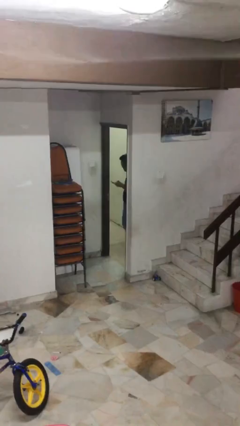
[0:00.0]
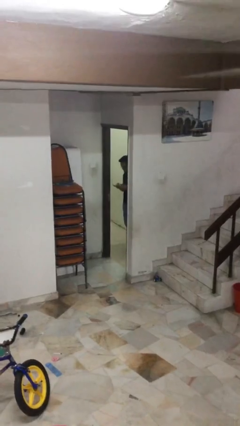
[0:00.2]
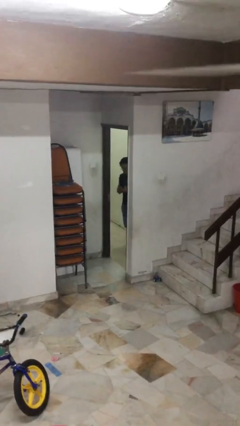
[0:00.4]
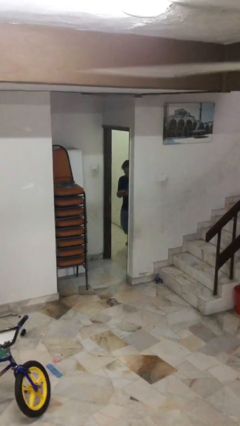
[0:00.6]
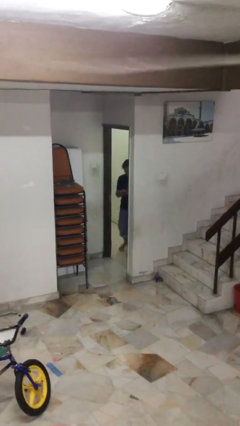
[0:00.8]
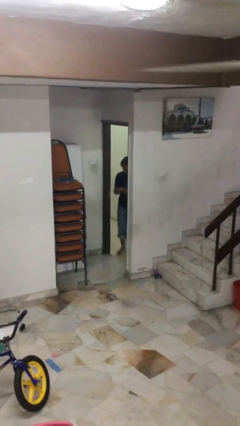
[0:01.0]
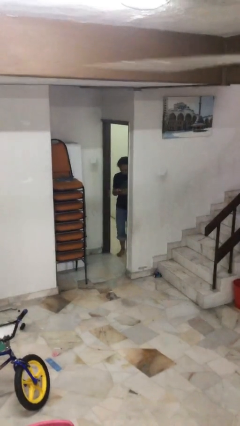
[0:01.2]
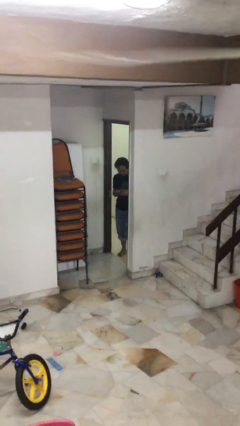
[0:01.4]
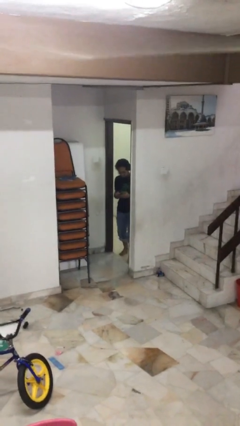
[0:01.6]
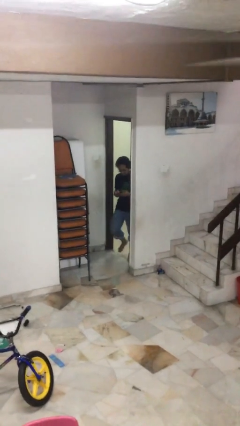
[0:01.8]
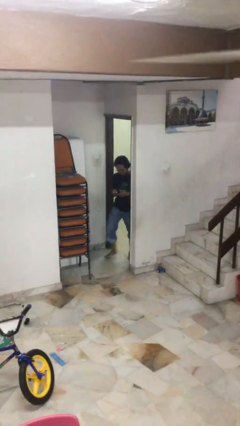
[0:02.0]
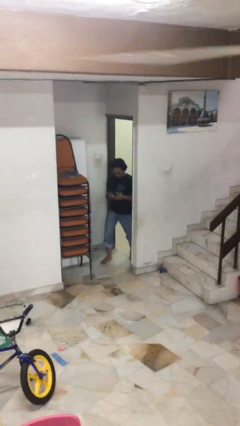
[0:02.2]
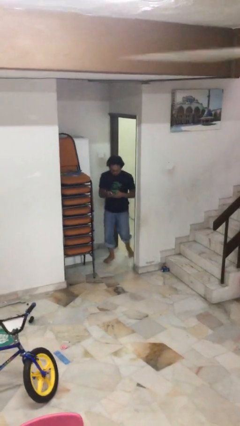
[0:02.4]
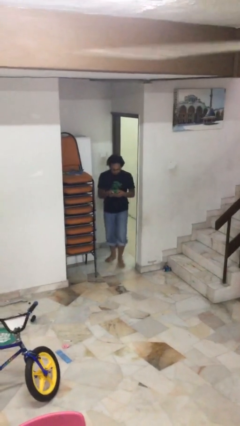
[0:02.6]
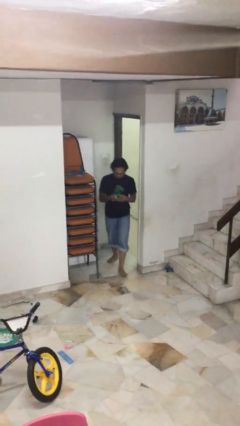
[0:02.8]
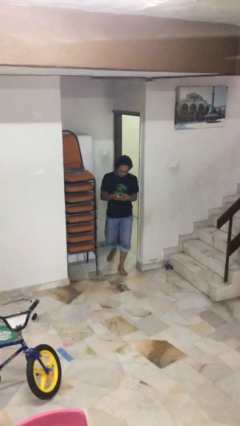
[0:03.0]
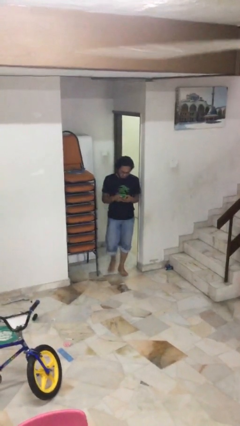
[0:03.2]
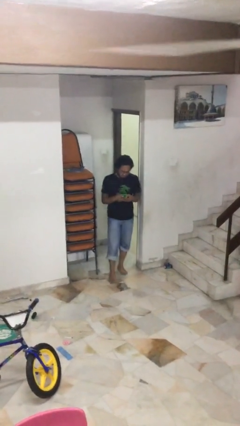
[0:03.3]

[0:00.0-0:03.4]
person enters scene through structure

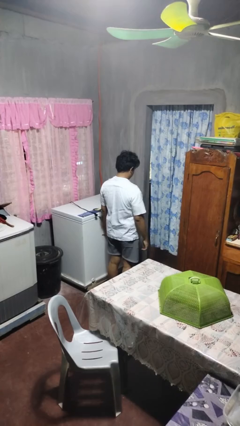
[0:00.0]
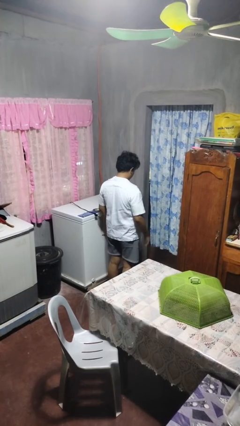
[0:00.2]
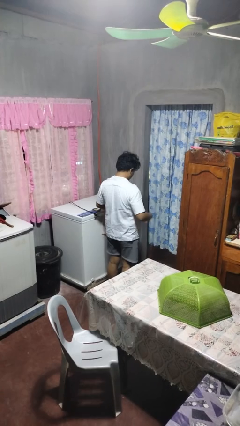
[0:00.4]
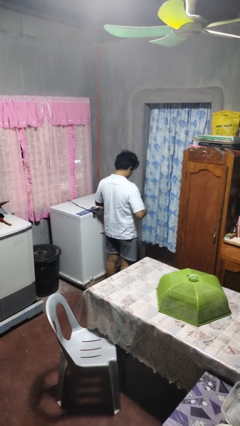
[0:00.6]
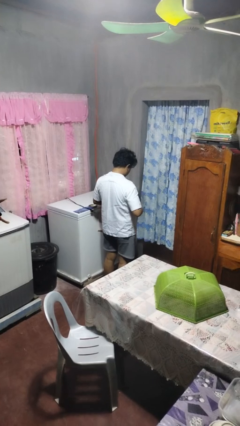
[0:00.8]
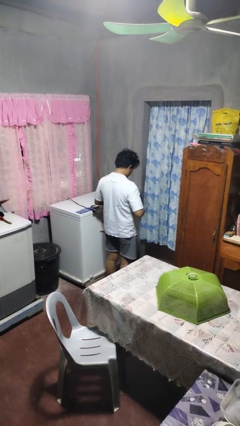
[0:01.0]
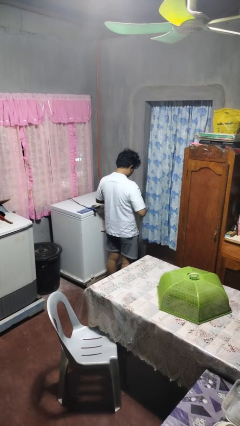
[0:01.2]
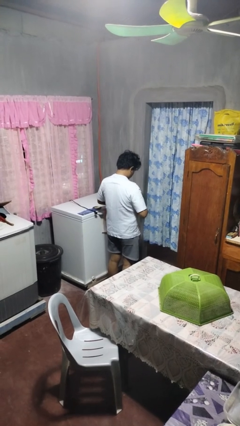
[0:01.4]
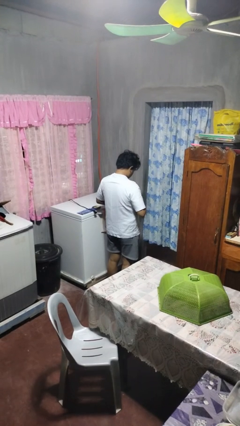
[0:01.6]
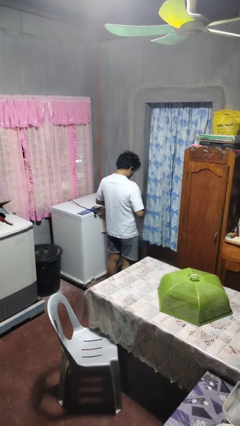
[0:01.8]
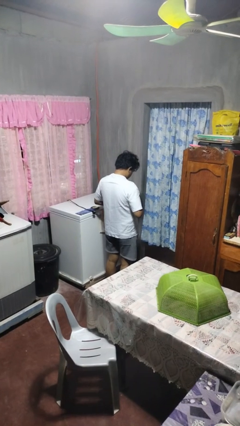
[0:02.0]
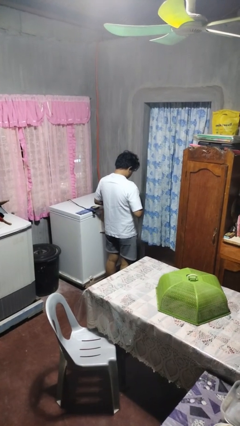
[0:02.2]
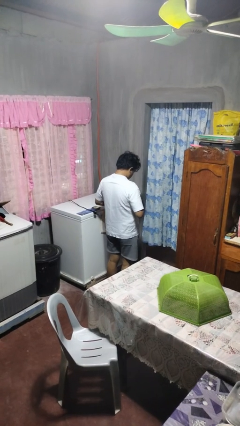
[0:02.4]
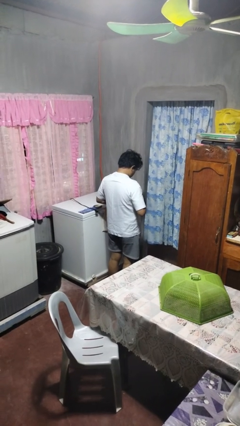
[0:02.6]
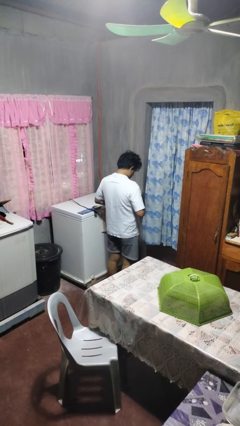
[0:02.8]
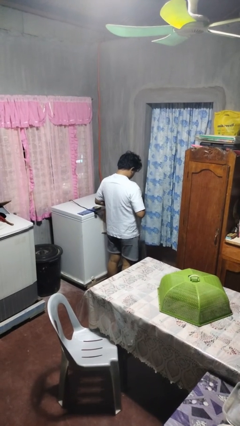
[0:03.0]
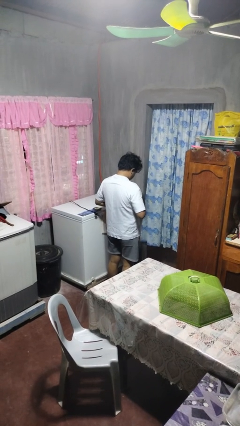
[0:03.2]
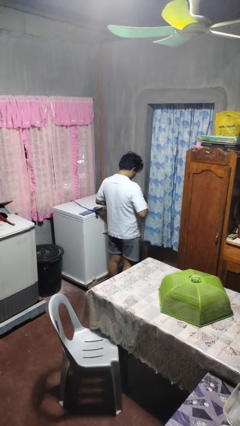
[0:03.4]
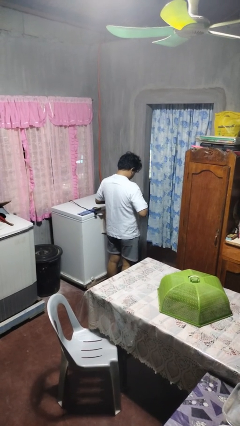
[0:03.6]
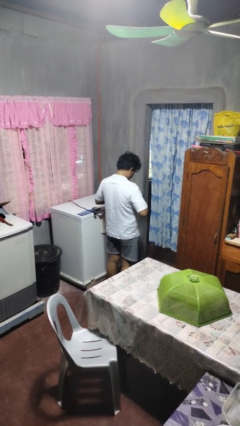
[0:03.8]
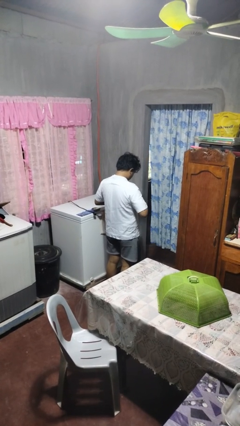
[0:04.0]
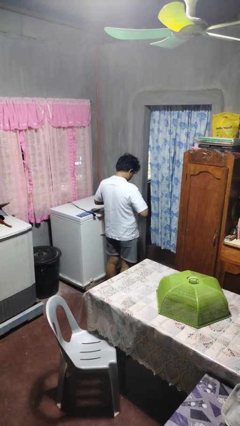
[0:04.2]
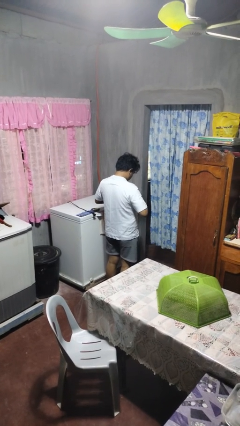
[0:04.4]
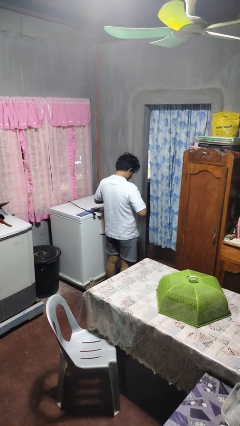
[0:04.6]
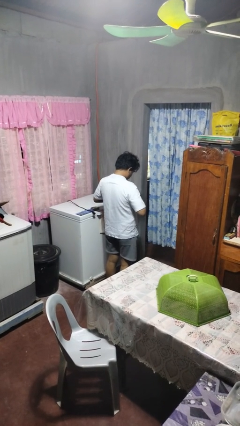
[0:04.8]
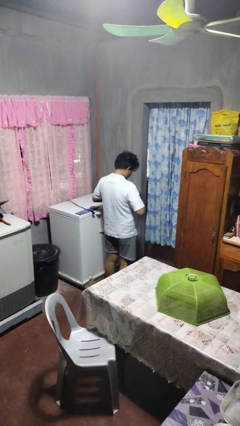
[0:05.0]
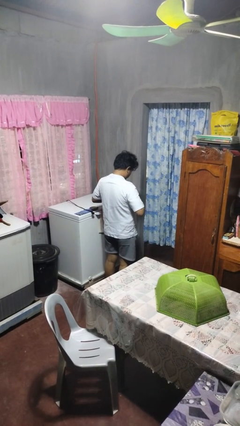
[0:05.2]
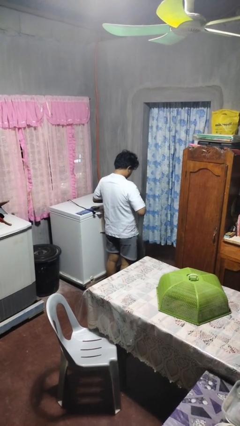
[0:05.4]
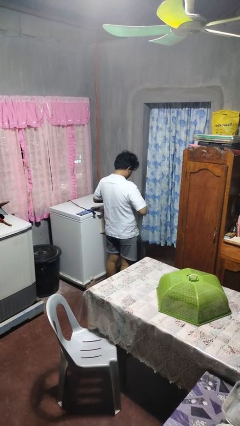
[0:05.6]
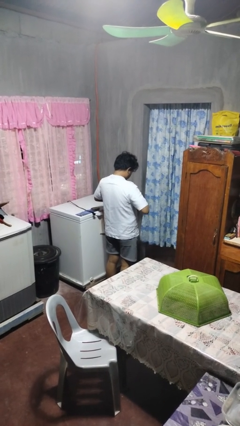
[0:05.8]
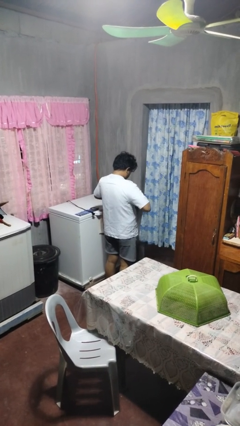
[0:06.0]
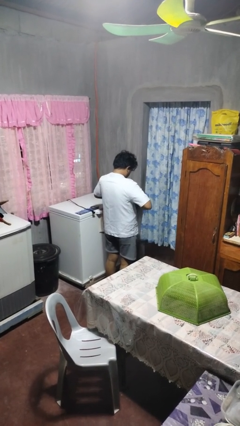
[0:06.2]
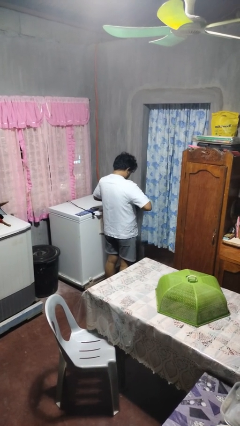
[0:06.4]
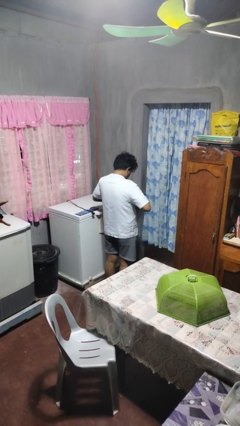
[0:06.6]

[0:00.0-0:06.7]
person buttons shirt

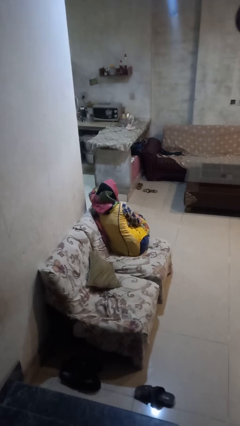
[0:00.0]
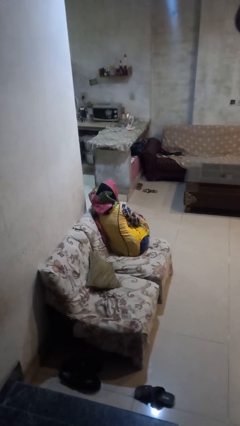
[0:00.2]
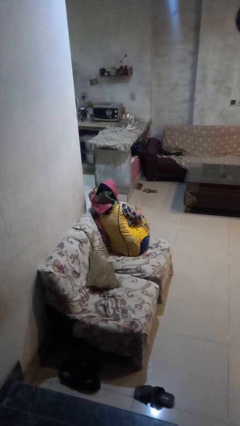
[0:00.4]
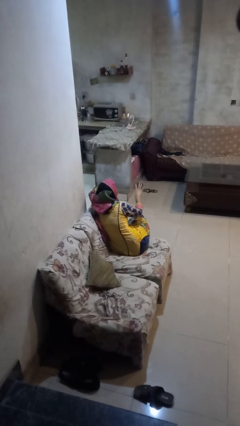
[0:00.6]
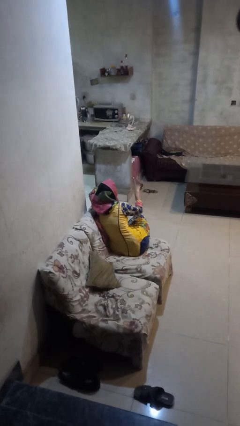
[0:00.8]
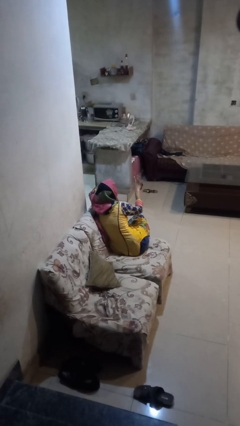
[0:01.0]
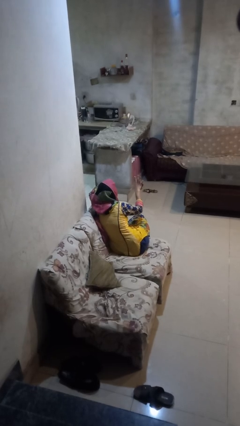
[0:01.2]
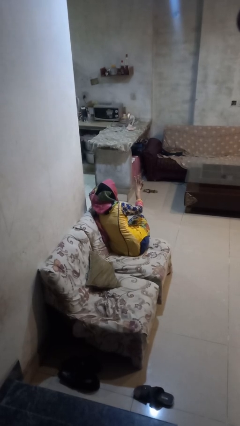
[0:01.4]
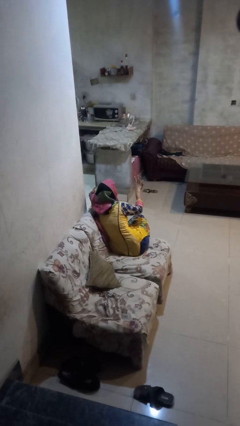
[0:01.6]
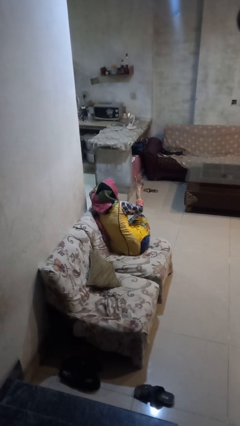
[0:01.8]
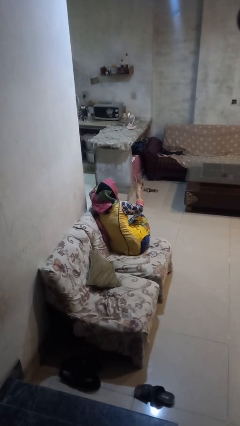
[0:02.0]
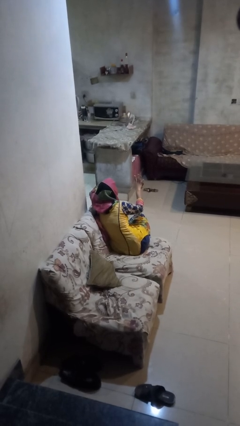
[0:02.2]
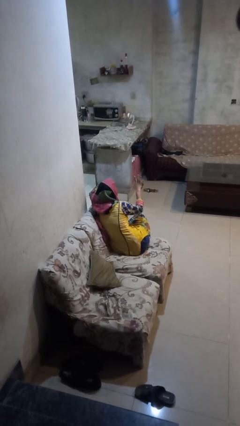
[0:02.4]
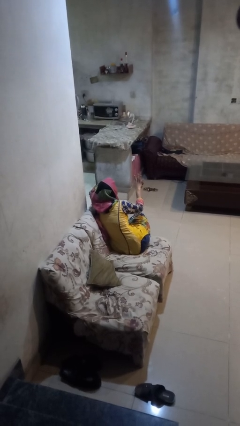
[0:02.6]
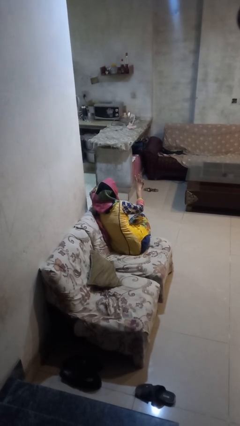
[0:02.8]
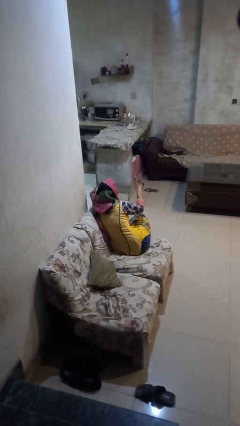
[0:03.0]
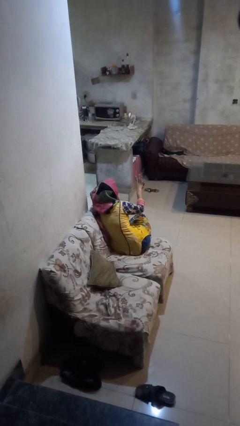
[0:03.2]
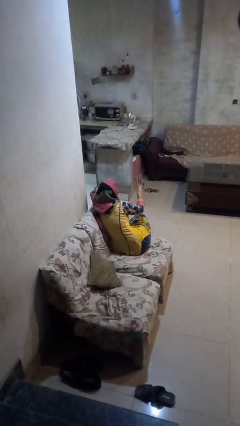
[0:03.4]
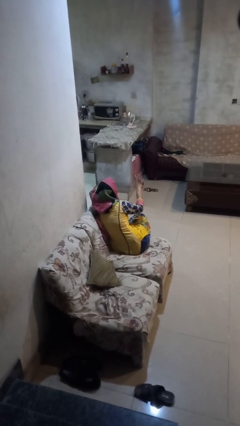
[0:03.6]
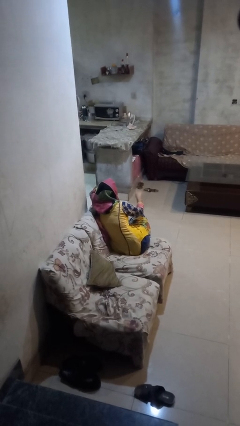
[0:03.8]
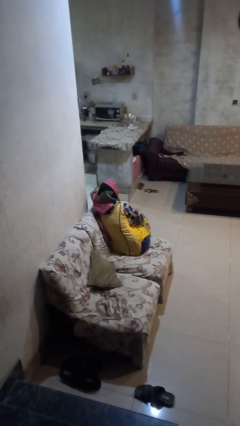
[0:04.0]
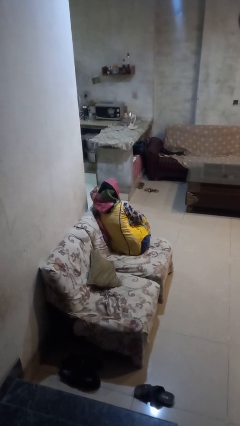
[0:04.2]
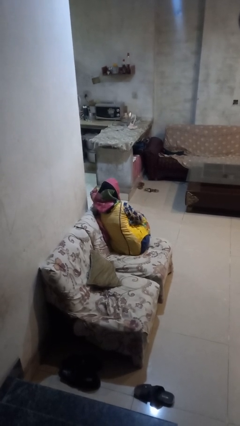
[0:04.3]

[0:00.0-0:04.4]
person gestures number four

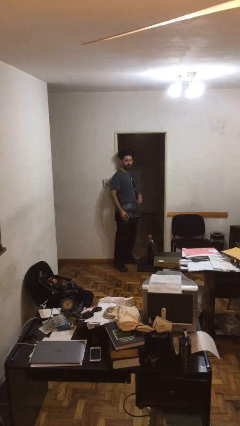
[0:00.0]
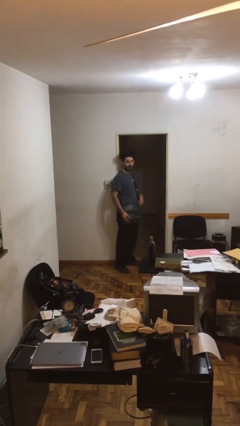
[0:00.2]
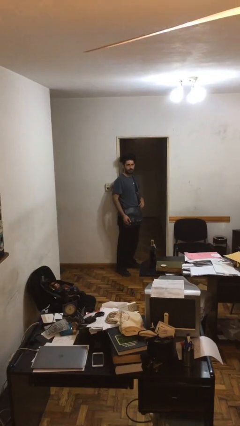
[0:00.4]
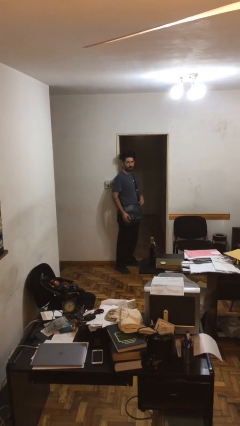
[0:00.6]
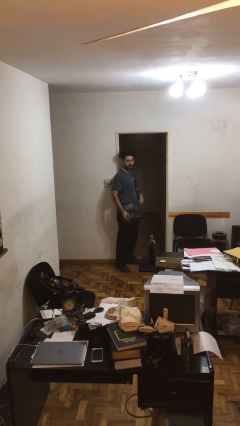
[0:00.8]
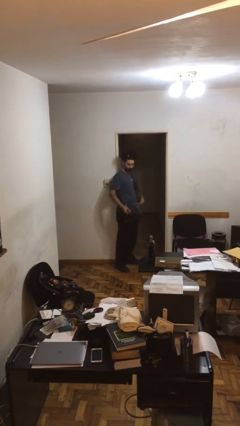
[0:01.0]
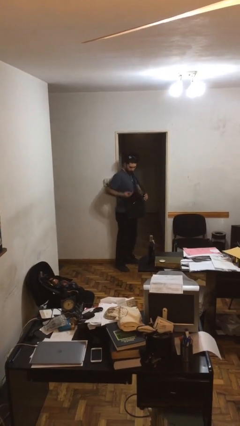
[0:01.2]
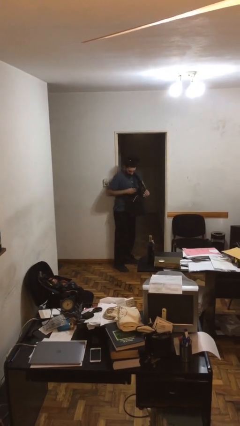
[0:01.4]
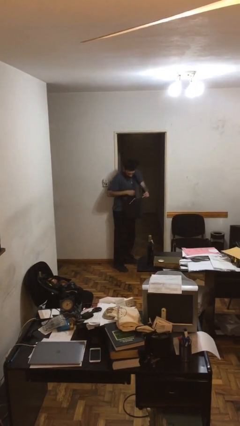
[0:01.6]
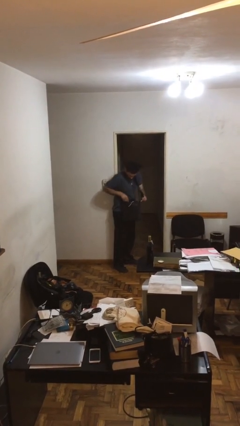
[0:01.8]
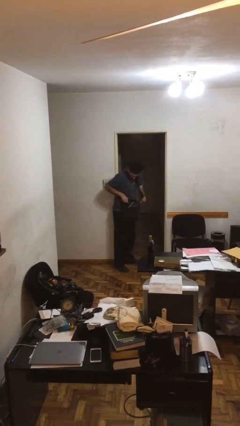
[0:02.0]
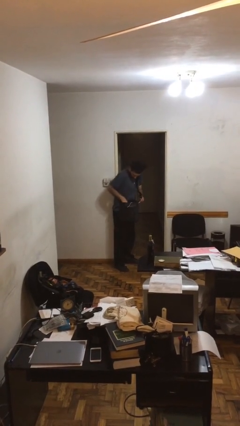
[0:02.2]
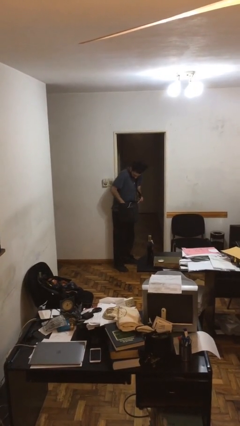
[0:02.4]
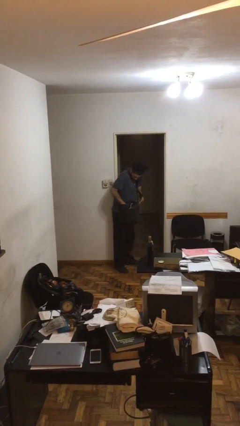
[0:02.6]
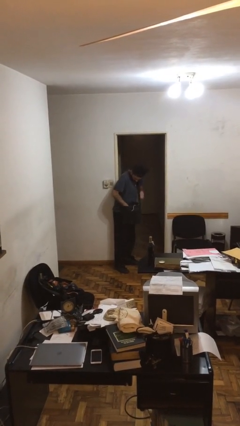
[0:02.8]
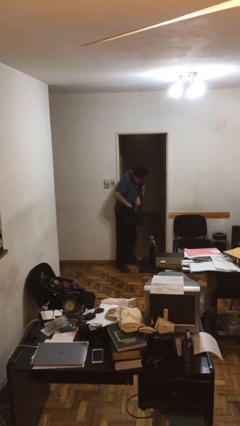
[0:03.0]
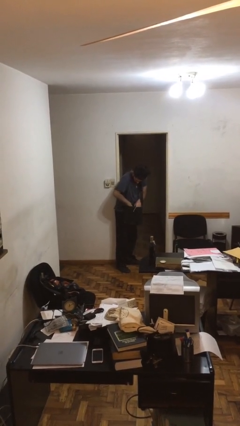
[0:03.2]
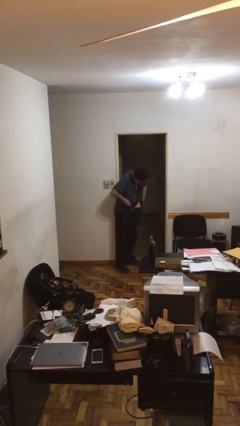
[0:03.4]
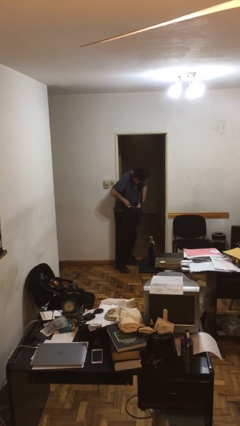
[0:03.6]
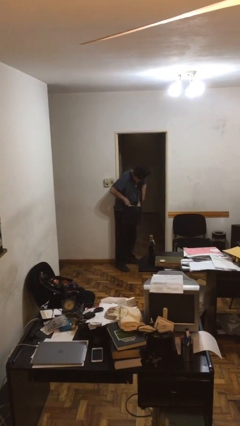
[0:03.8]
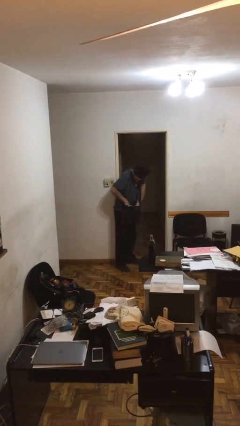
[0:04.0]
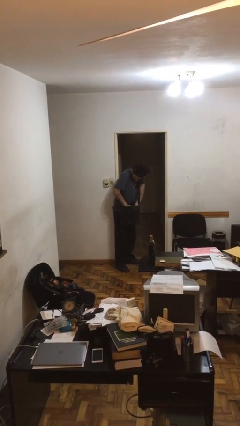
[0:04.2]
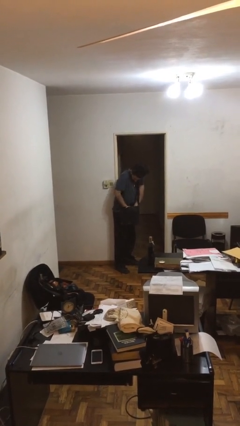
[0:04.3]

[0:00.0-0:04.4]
person searches in purse
